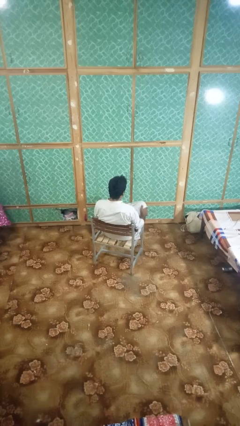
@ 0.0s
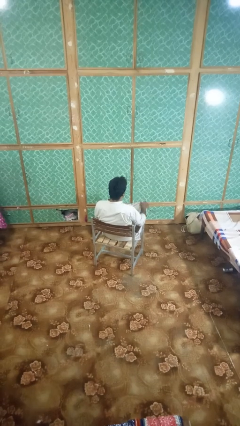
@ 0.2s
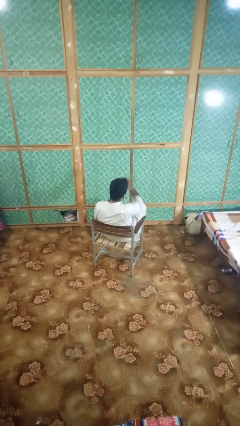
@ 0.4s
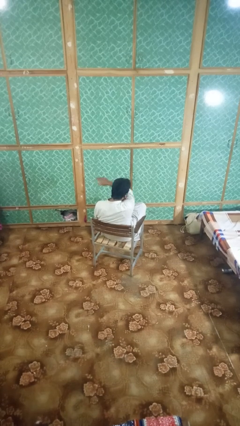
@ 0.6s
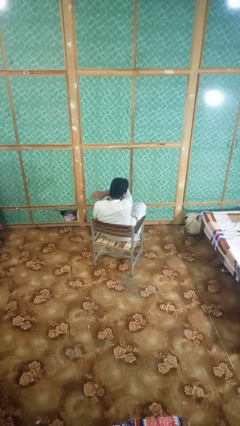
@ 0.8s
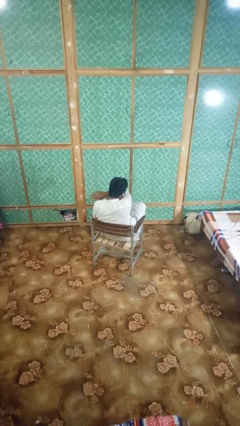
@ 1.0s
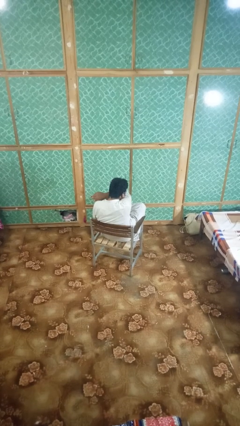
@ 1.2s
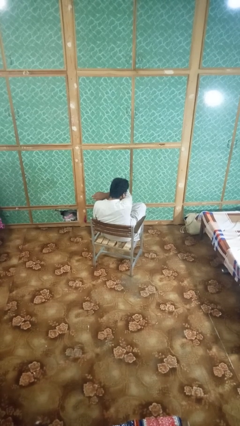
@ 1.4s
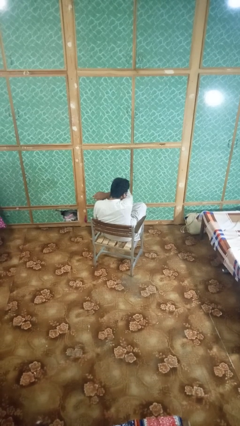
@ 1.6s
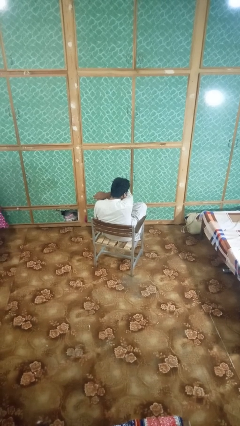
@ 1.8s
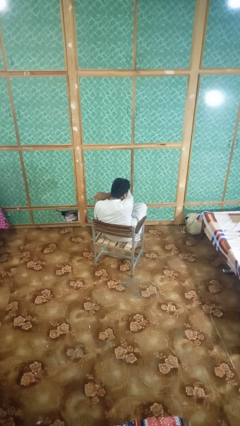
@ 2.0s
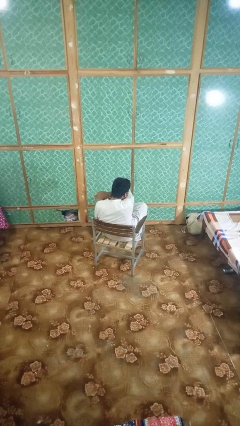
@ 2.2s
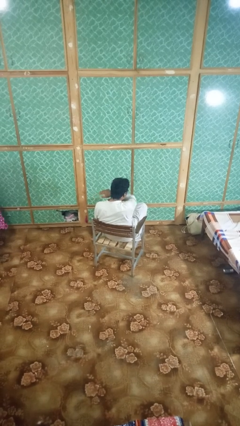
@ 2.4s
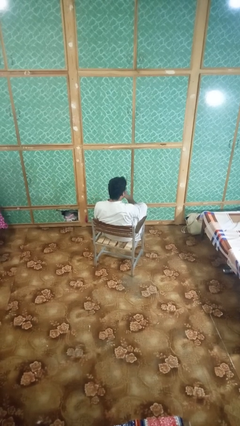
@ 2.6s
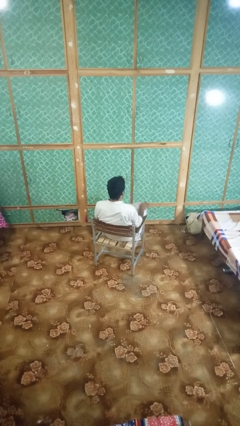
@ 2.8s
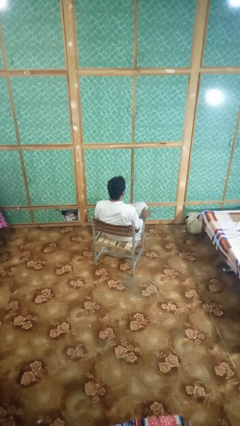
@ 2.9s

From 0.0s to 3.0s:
person sneezes into arm

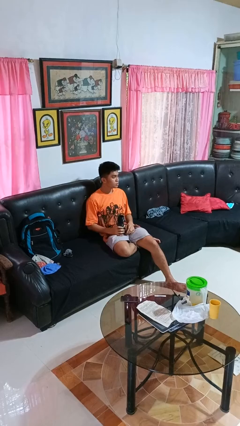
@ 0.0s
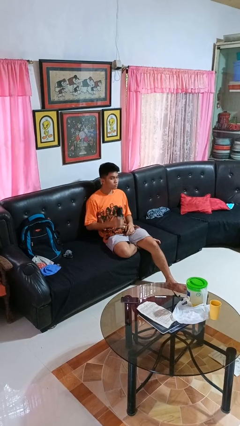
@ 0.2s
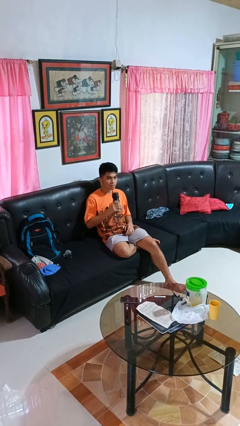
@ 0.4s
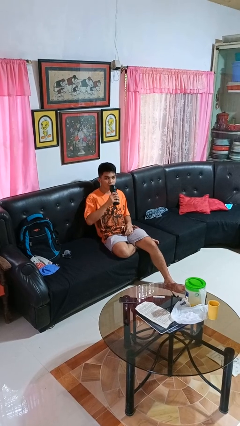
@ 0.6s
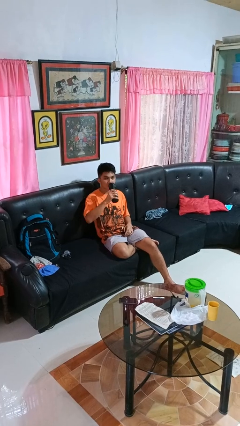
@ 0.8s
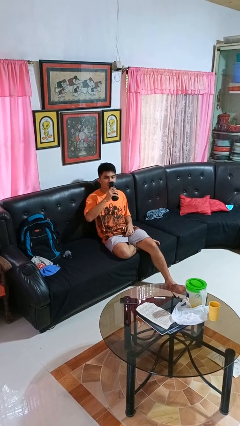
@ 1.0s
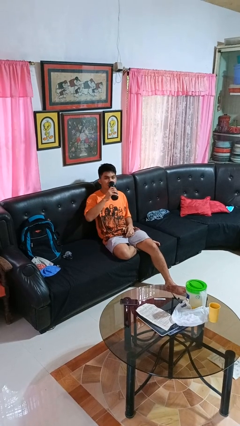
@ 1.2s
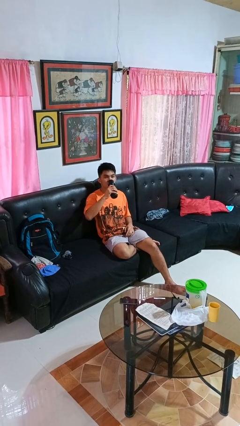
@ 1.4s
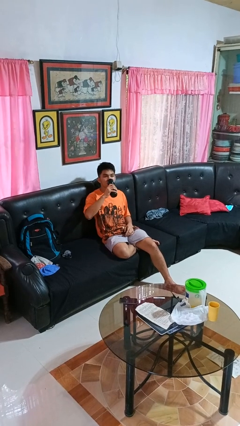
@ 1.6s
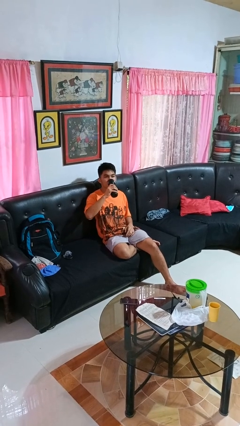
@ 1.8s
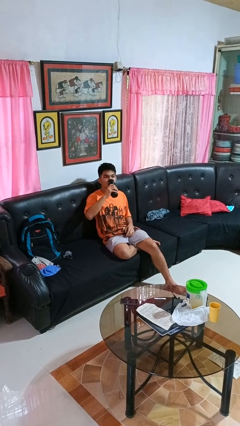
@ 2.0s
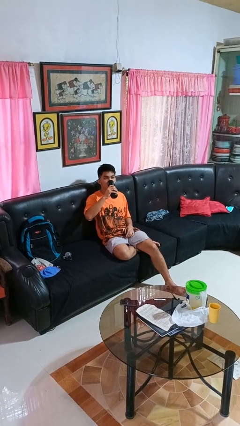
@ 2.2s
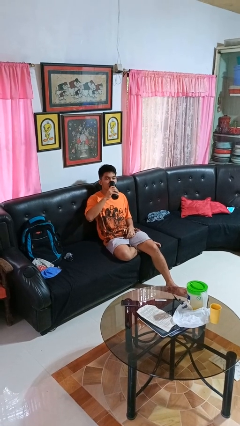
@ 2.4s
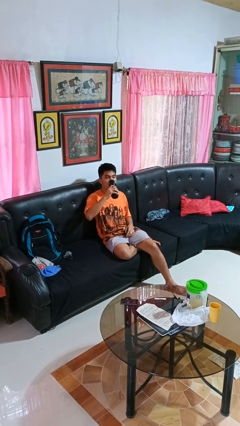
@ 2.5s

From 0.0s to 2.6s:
person drinks from bottle

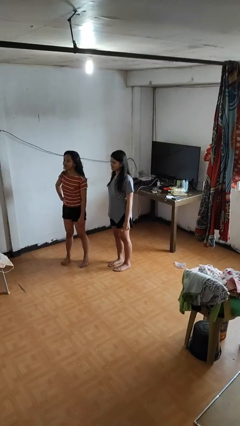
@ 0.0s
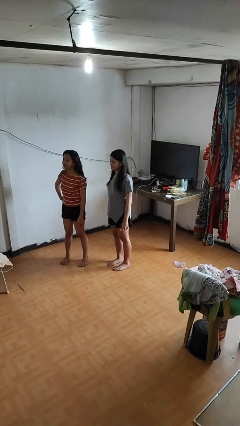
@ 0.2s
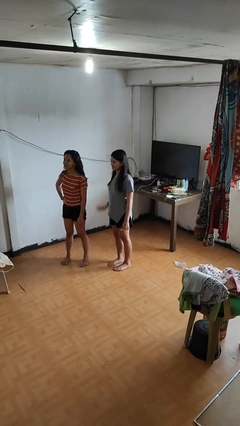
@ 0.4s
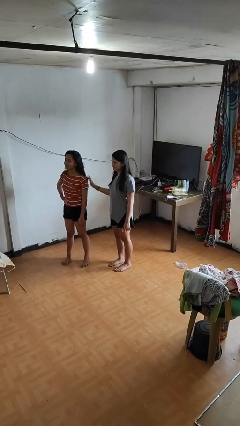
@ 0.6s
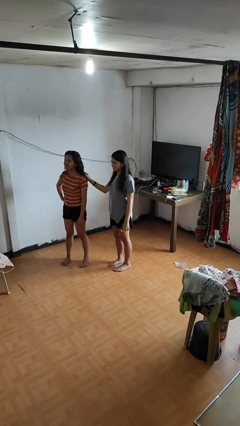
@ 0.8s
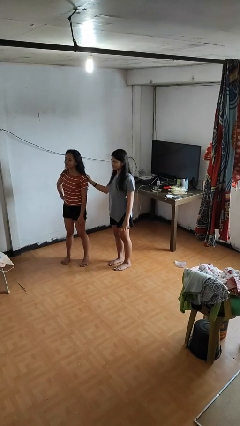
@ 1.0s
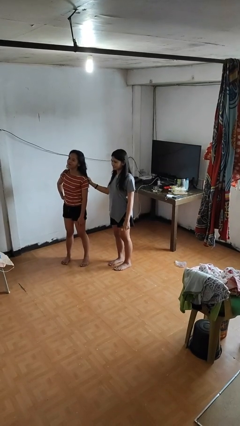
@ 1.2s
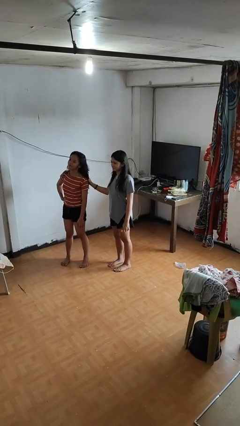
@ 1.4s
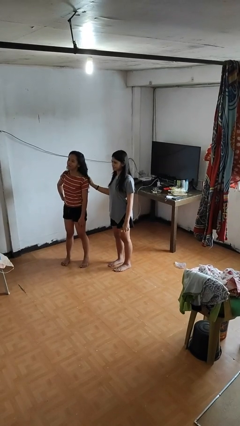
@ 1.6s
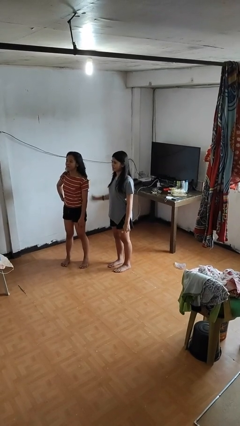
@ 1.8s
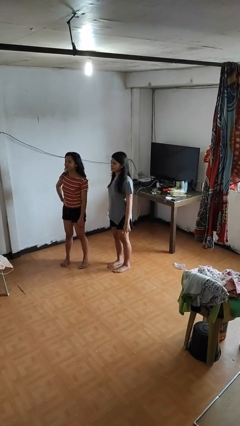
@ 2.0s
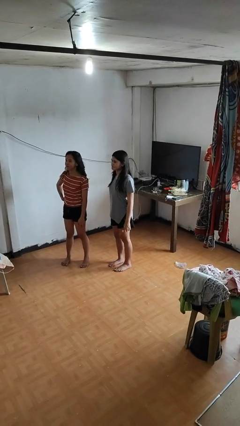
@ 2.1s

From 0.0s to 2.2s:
person grabs person by hair

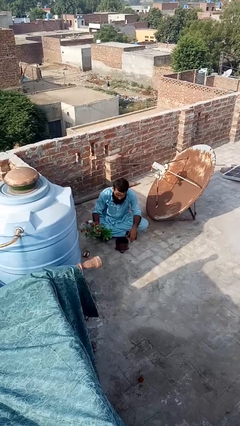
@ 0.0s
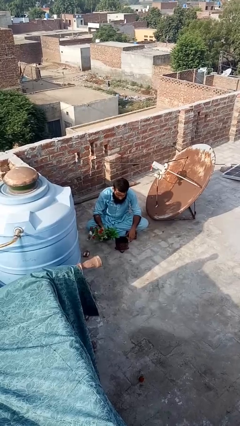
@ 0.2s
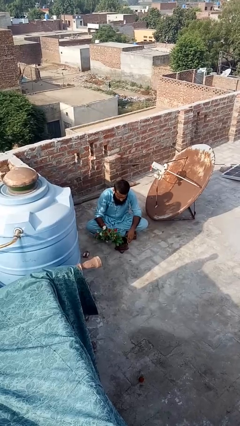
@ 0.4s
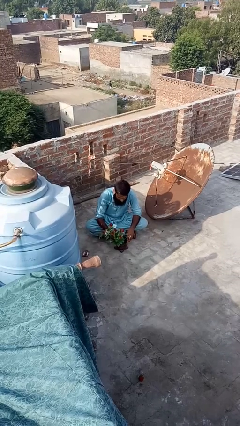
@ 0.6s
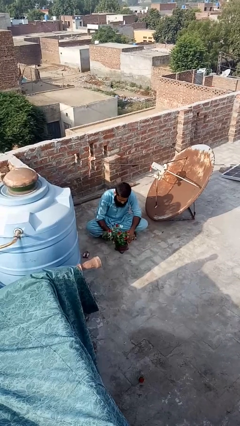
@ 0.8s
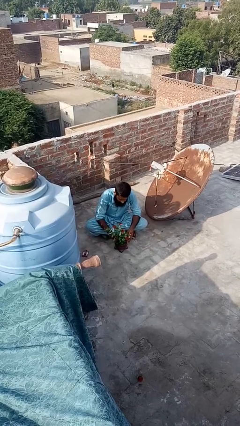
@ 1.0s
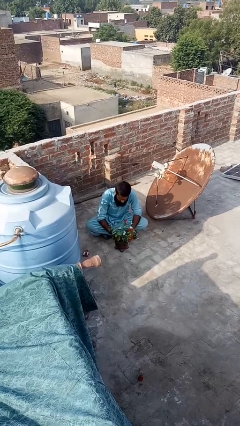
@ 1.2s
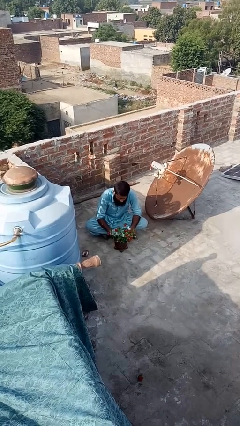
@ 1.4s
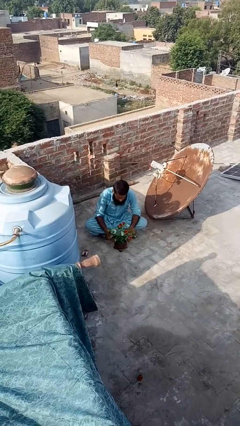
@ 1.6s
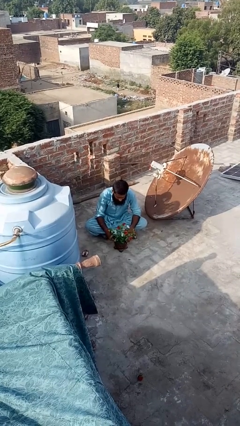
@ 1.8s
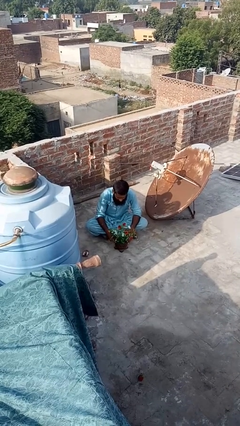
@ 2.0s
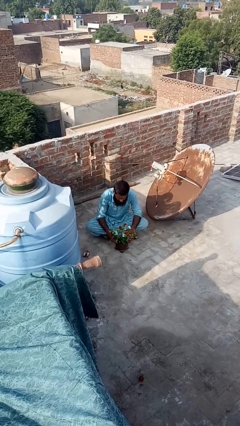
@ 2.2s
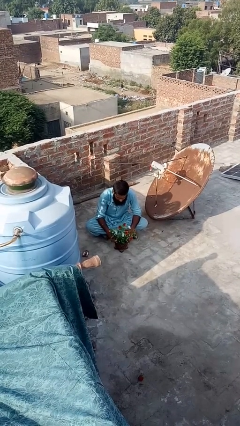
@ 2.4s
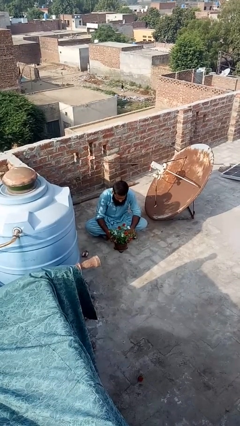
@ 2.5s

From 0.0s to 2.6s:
person arranges flowers in vase

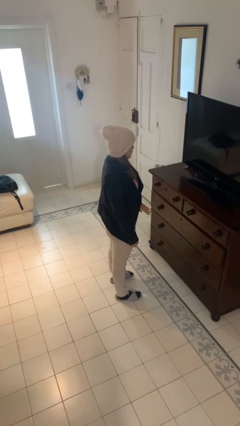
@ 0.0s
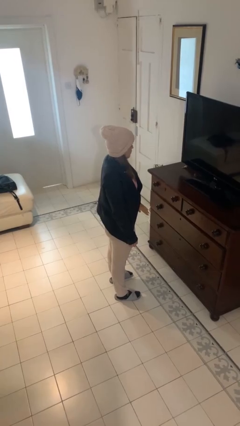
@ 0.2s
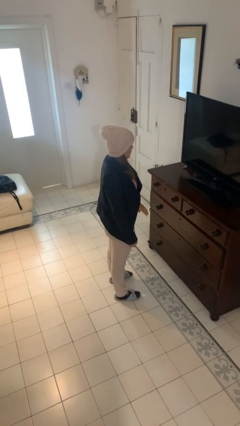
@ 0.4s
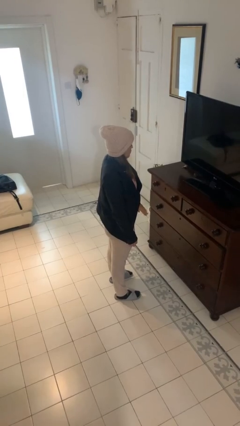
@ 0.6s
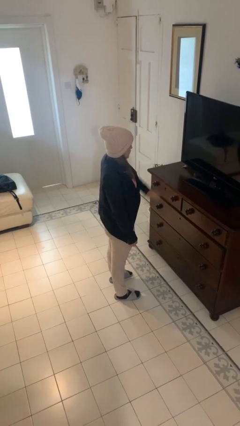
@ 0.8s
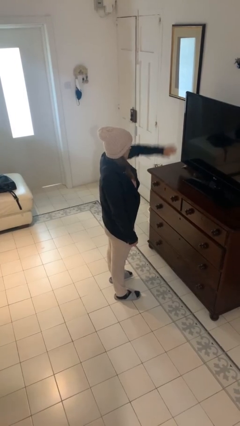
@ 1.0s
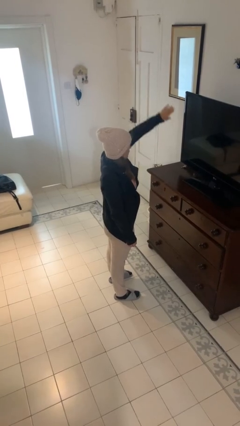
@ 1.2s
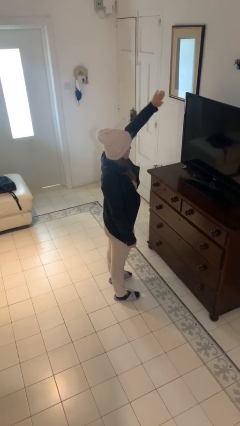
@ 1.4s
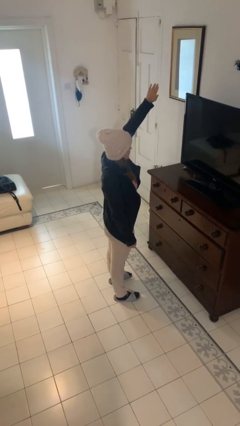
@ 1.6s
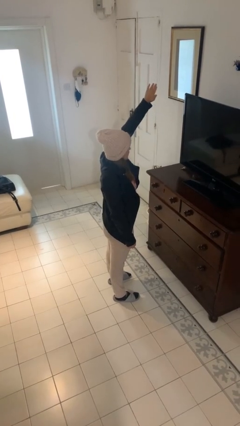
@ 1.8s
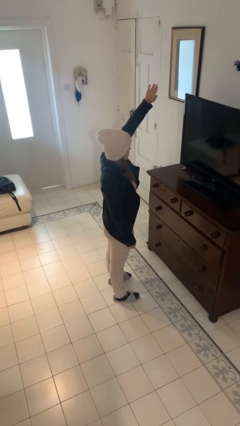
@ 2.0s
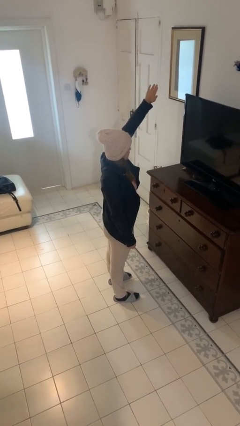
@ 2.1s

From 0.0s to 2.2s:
person gestures swipe up

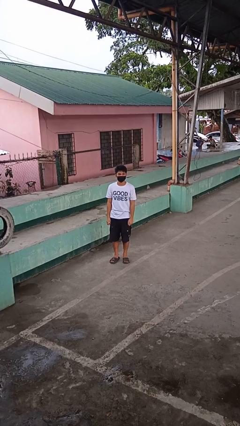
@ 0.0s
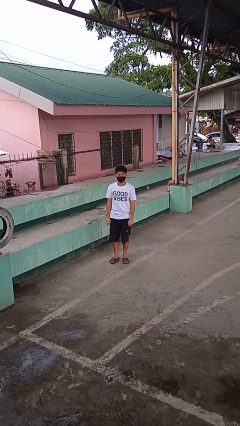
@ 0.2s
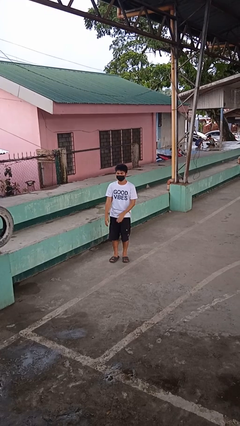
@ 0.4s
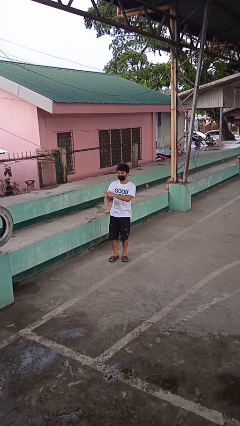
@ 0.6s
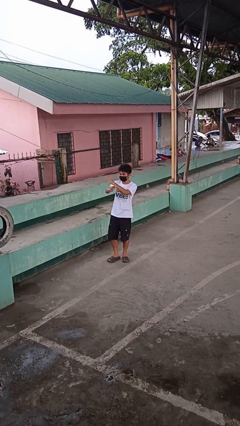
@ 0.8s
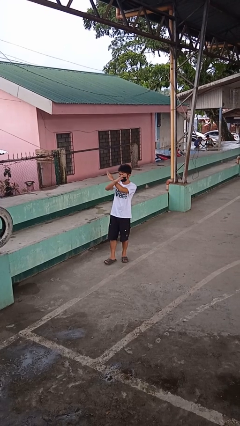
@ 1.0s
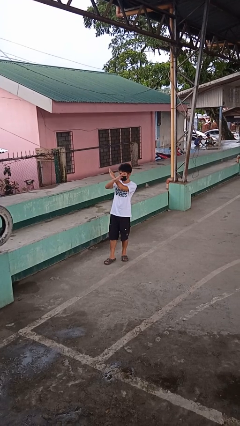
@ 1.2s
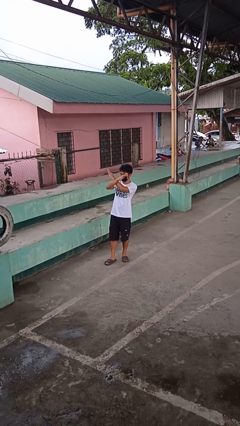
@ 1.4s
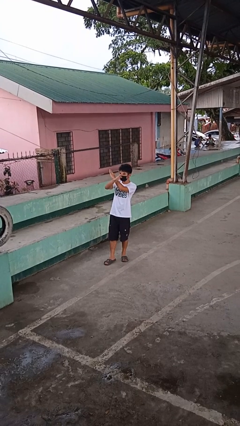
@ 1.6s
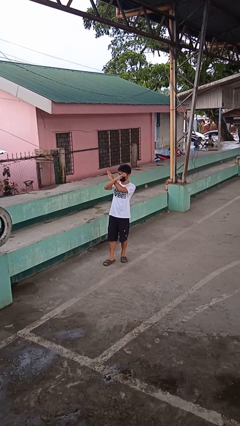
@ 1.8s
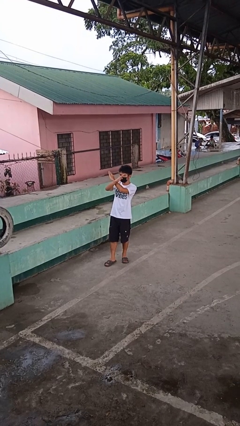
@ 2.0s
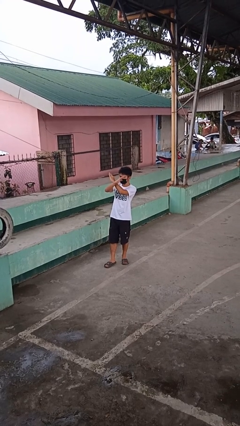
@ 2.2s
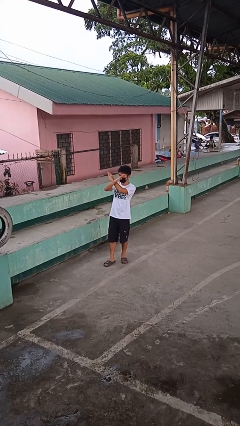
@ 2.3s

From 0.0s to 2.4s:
person gestures arms x

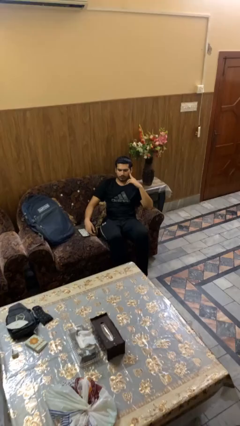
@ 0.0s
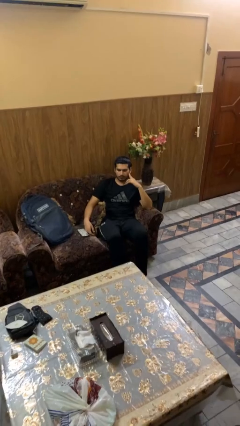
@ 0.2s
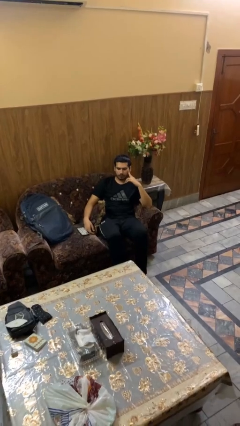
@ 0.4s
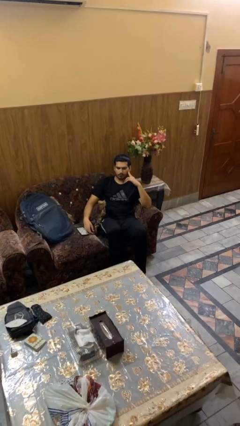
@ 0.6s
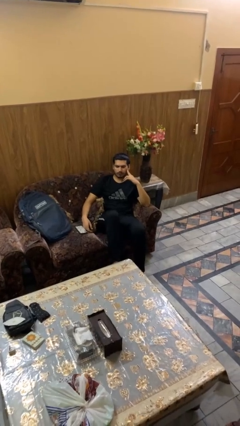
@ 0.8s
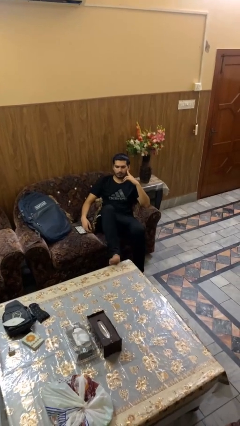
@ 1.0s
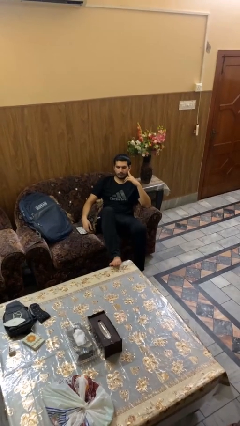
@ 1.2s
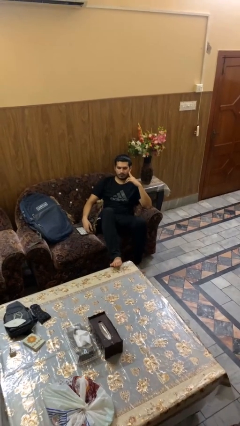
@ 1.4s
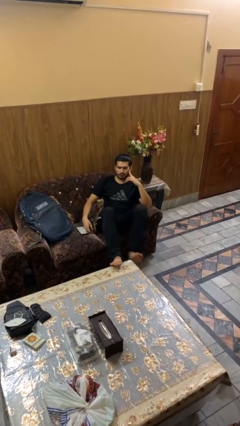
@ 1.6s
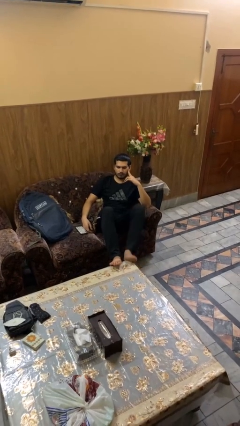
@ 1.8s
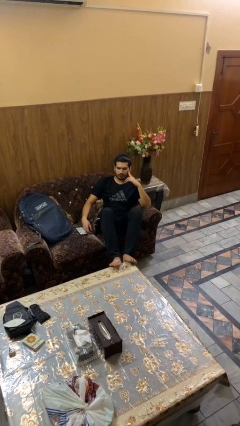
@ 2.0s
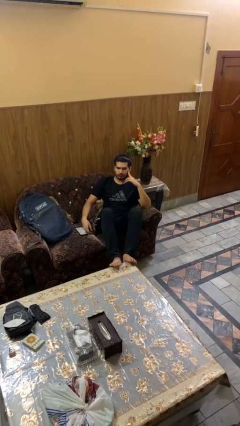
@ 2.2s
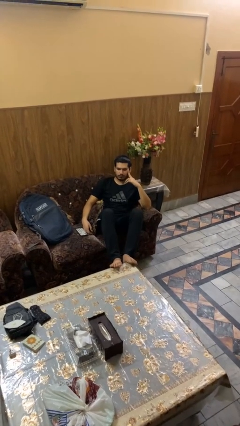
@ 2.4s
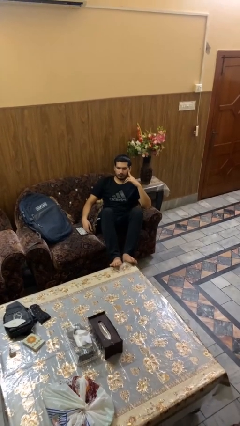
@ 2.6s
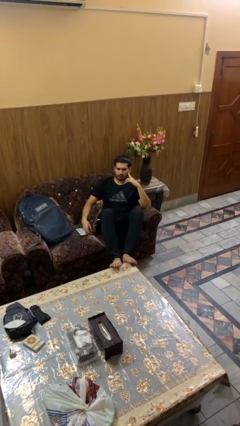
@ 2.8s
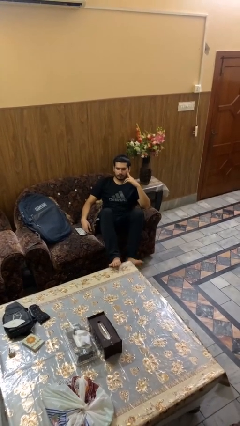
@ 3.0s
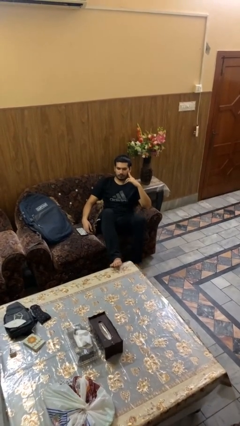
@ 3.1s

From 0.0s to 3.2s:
person puts feet up
